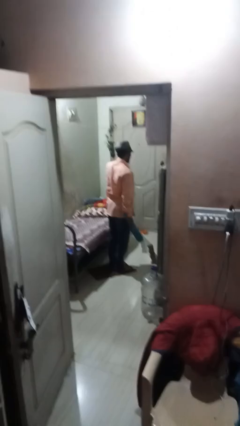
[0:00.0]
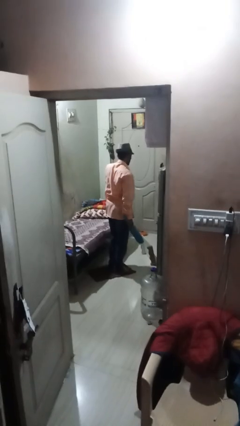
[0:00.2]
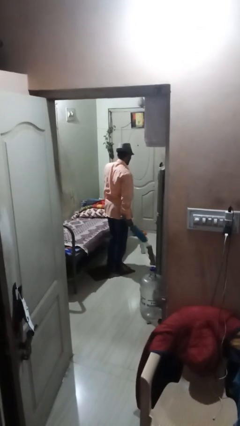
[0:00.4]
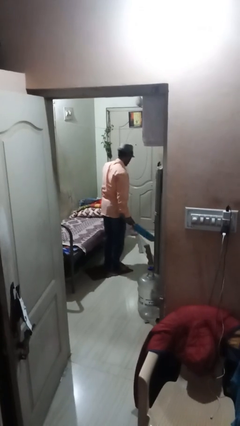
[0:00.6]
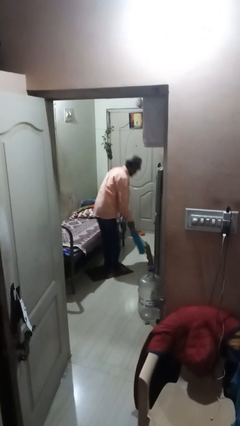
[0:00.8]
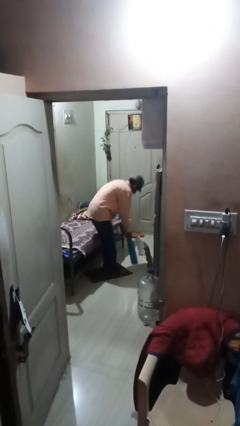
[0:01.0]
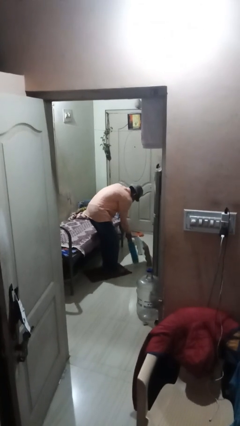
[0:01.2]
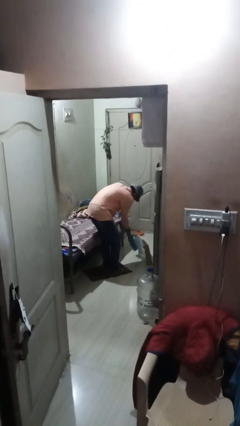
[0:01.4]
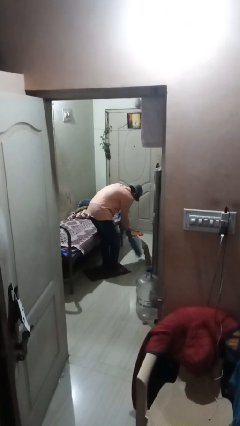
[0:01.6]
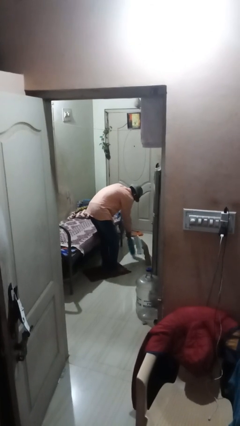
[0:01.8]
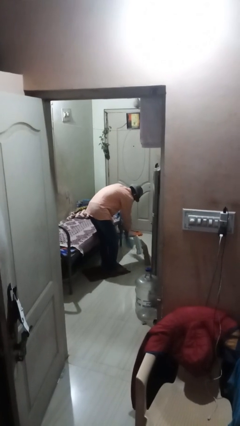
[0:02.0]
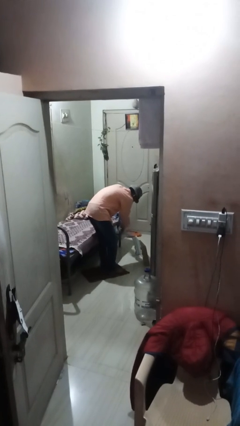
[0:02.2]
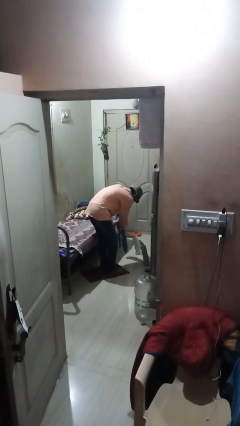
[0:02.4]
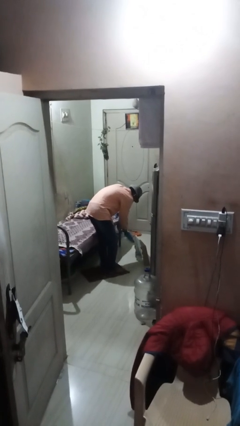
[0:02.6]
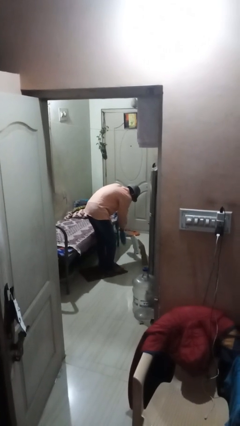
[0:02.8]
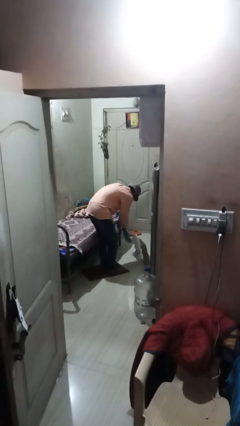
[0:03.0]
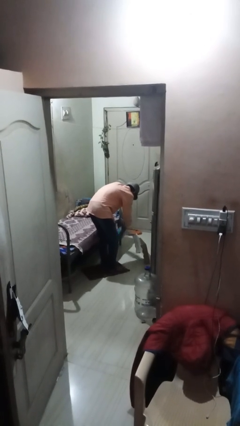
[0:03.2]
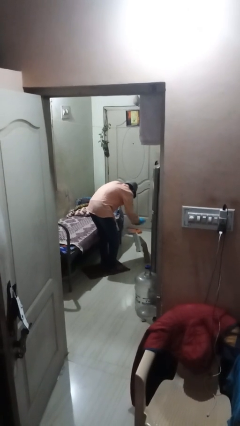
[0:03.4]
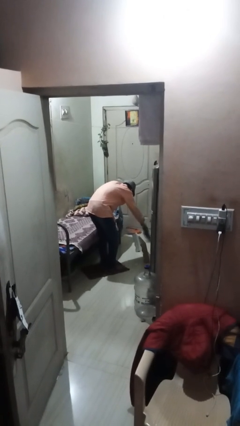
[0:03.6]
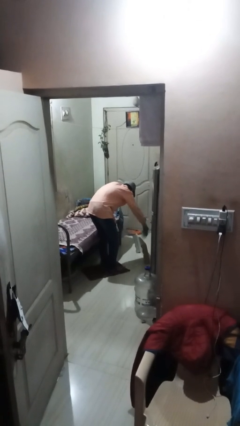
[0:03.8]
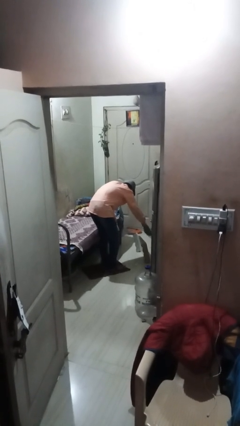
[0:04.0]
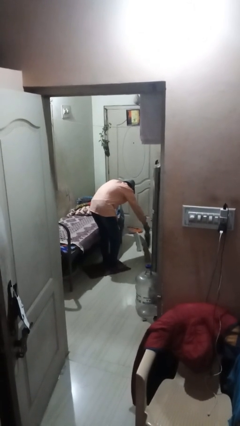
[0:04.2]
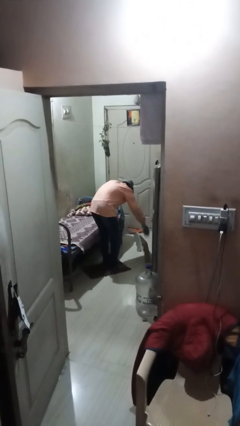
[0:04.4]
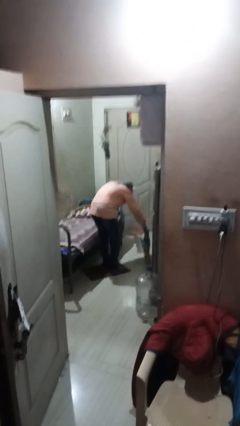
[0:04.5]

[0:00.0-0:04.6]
person dusts furniture

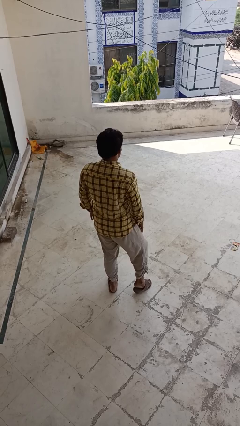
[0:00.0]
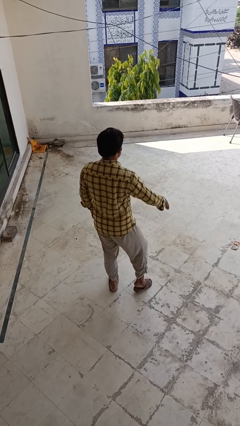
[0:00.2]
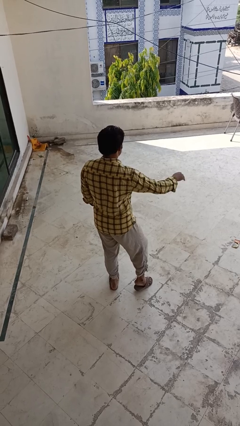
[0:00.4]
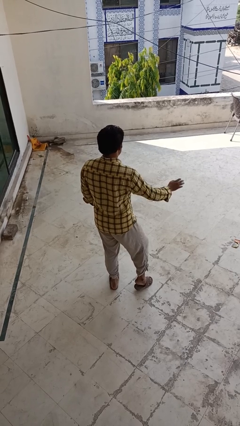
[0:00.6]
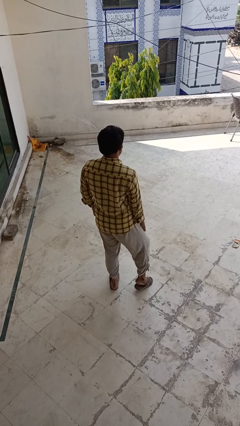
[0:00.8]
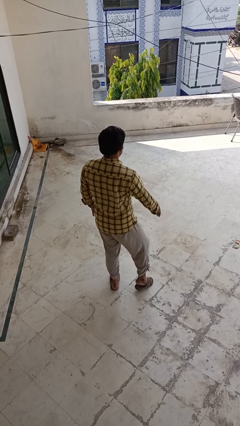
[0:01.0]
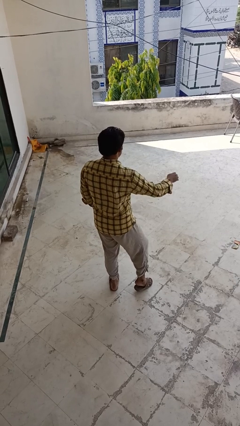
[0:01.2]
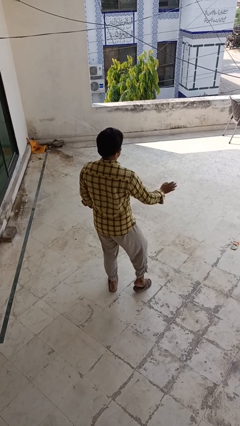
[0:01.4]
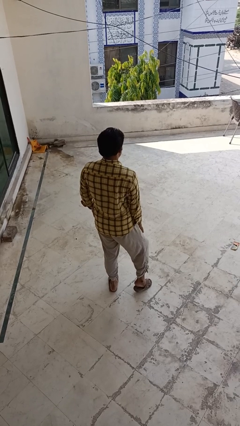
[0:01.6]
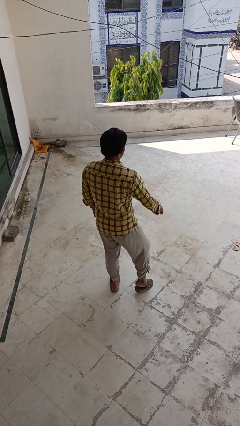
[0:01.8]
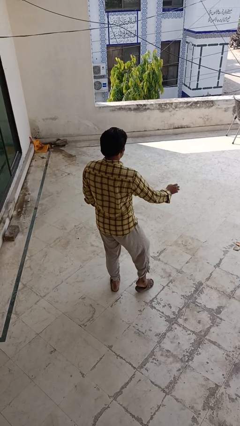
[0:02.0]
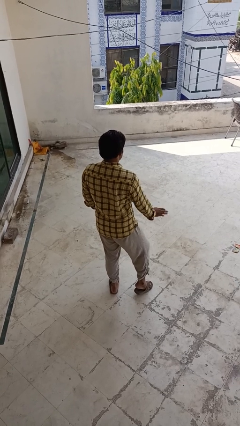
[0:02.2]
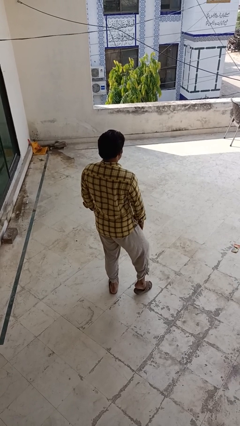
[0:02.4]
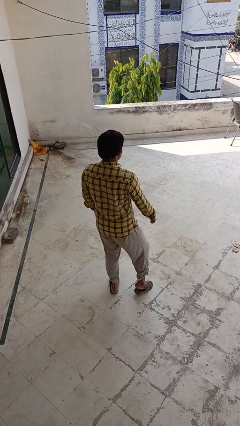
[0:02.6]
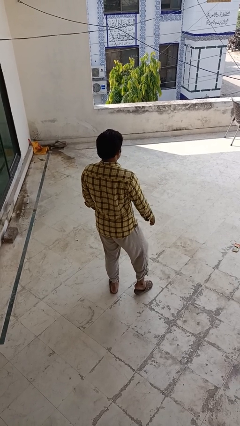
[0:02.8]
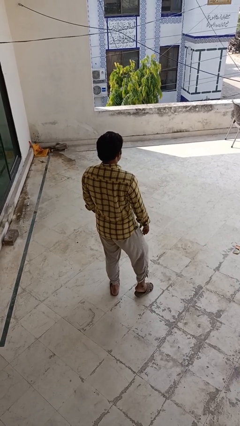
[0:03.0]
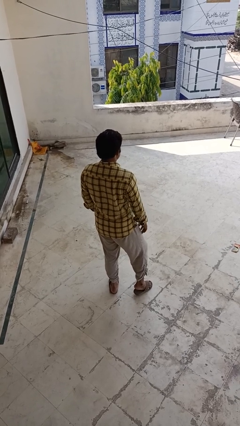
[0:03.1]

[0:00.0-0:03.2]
person slaps hands on thighs

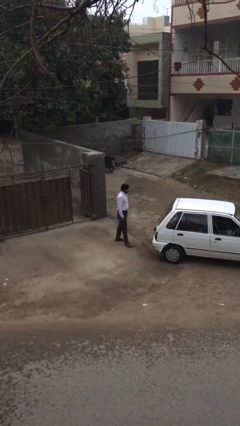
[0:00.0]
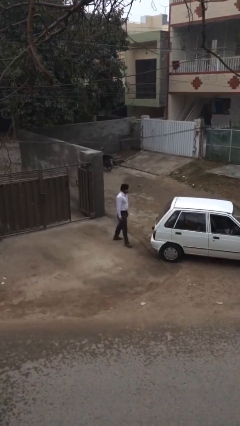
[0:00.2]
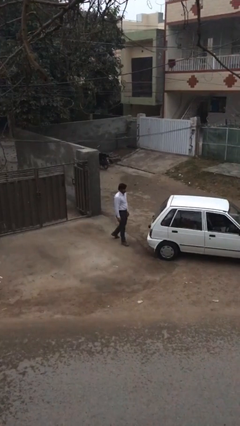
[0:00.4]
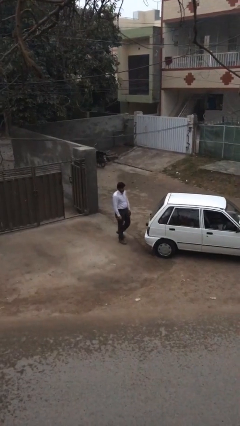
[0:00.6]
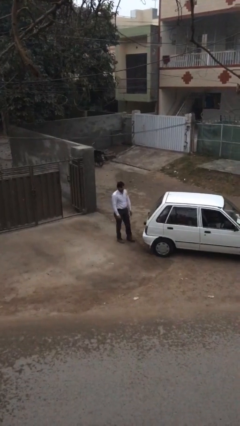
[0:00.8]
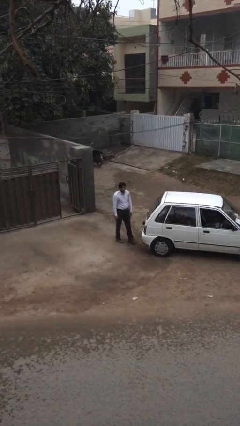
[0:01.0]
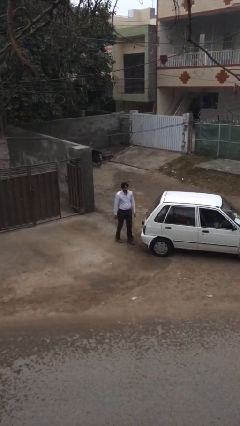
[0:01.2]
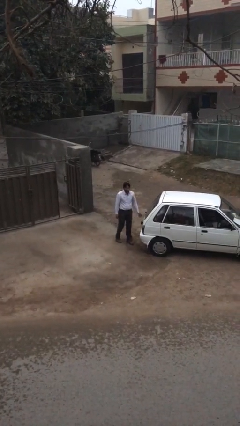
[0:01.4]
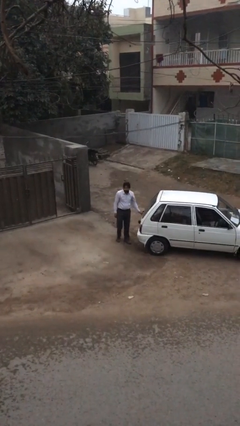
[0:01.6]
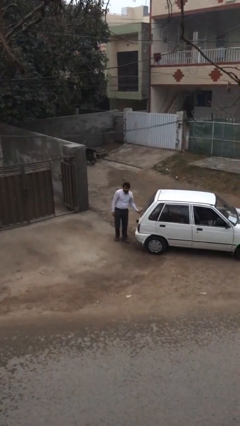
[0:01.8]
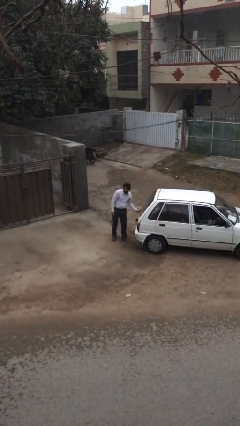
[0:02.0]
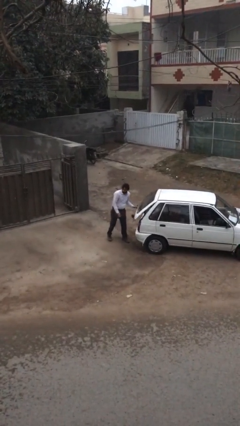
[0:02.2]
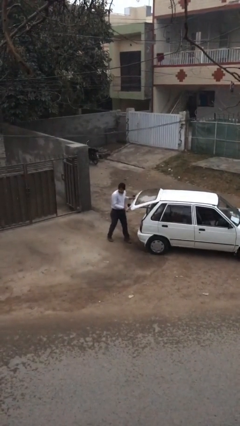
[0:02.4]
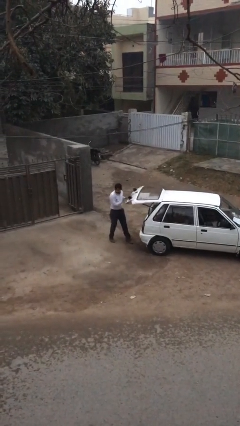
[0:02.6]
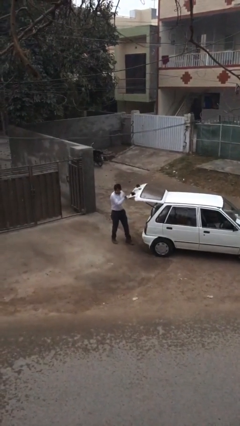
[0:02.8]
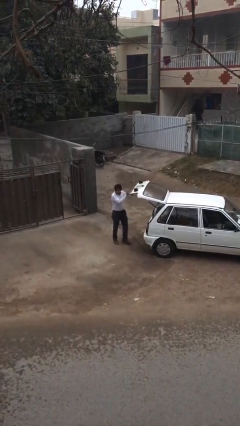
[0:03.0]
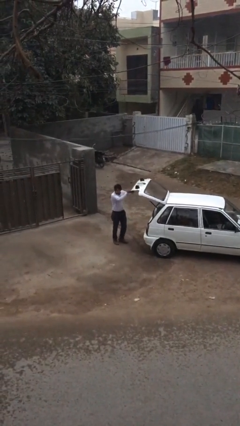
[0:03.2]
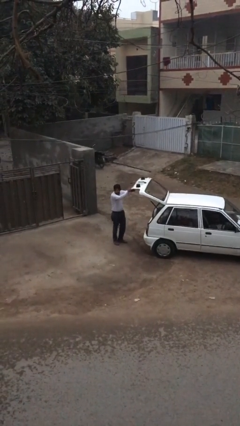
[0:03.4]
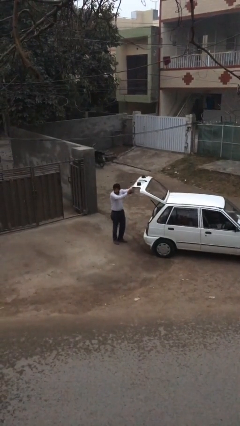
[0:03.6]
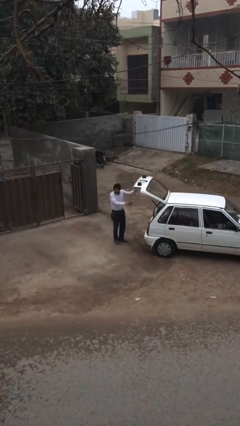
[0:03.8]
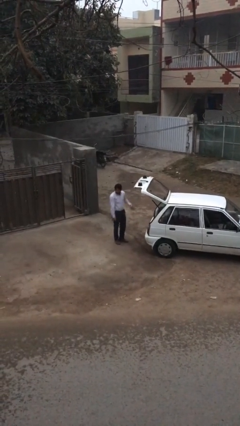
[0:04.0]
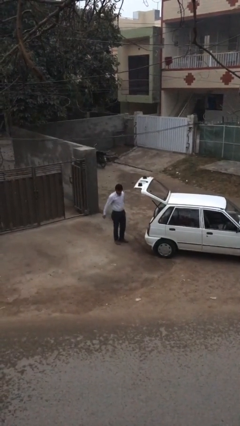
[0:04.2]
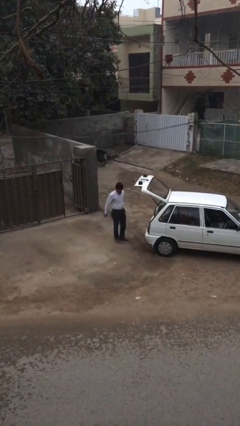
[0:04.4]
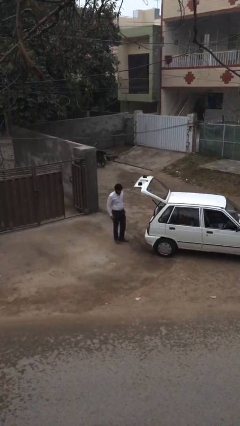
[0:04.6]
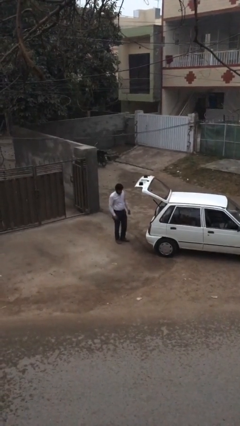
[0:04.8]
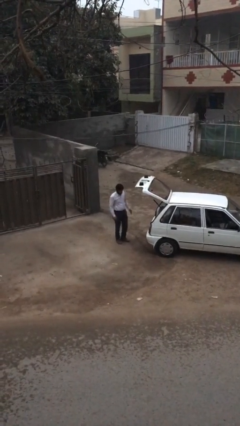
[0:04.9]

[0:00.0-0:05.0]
person opens car trunk

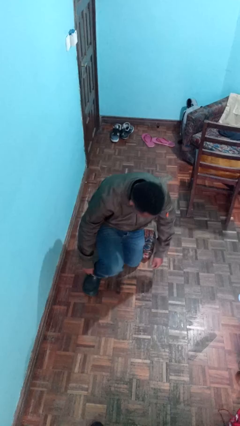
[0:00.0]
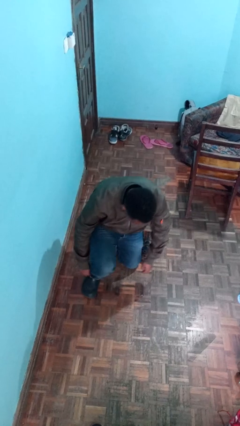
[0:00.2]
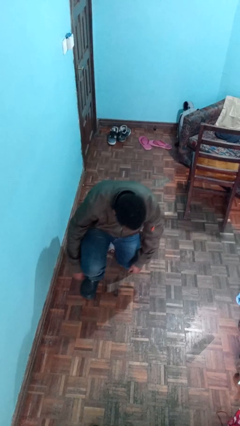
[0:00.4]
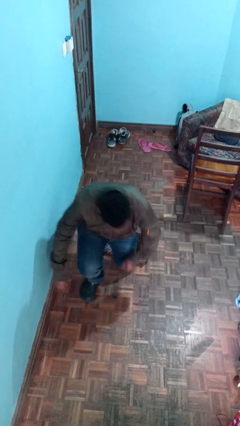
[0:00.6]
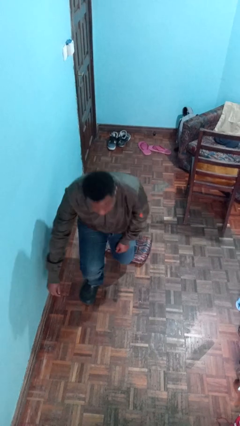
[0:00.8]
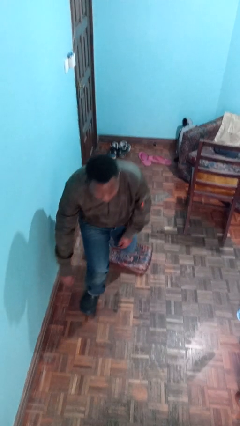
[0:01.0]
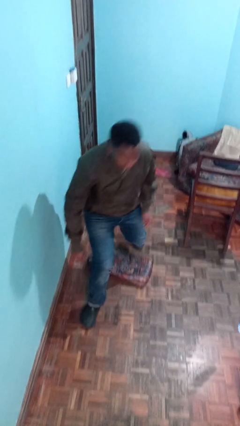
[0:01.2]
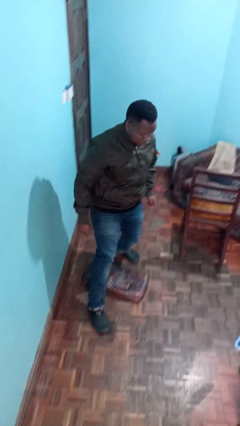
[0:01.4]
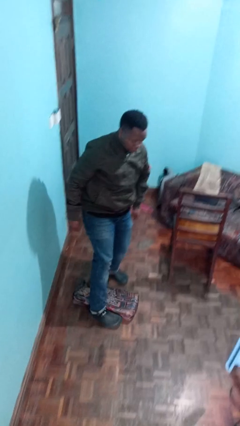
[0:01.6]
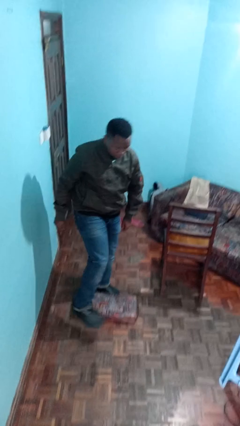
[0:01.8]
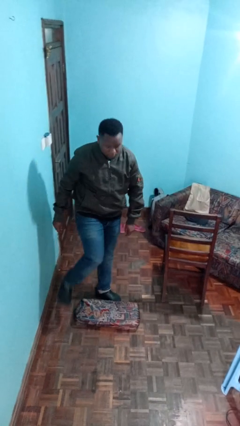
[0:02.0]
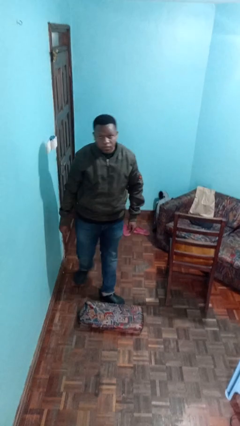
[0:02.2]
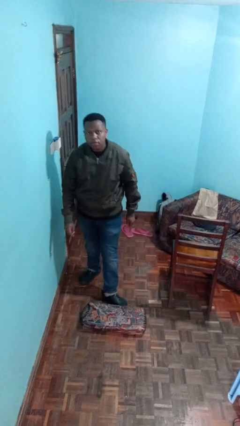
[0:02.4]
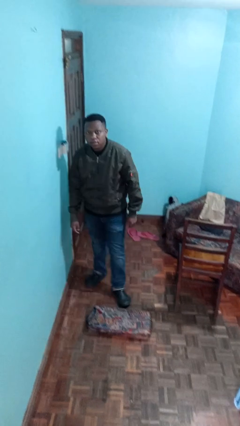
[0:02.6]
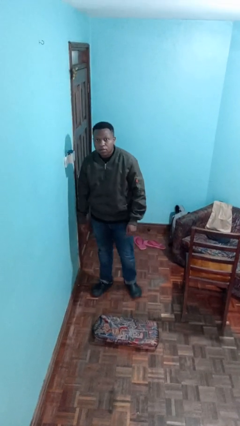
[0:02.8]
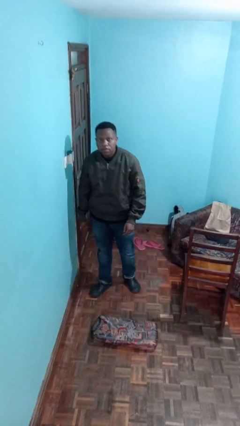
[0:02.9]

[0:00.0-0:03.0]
person stands up from floor

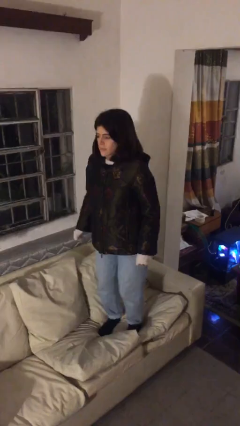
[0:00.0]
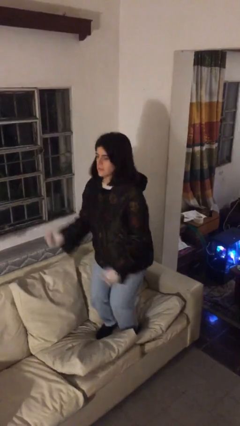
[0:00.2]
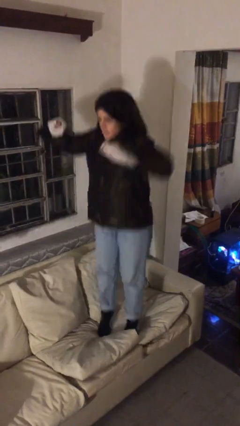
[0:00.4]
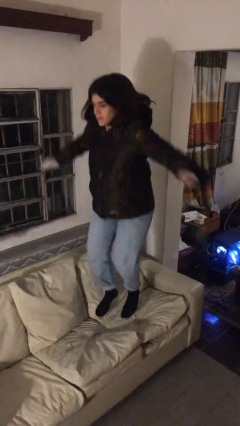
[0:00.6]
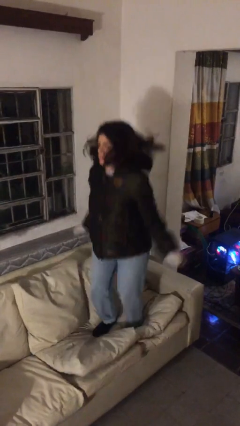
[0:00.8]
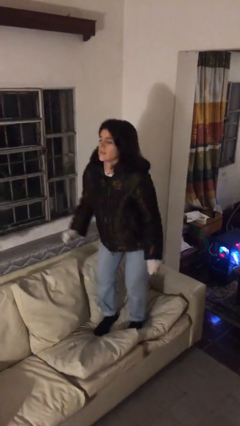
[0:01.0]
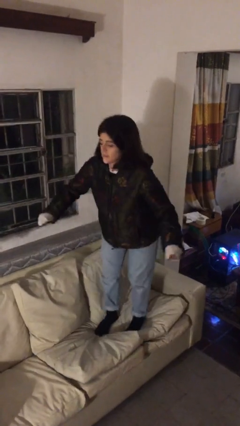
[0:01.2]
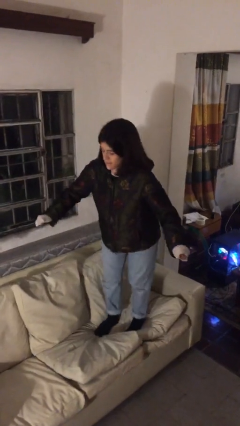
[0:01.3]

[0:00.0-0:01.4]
person jumps on couch

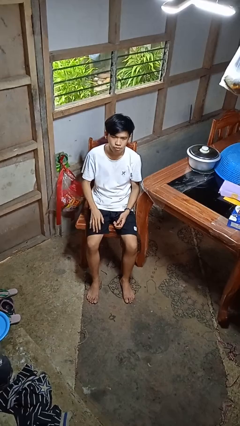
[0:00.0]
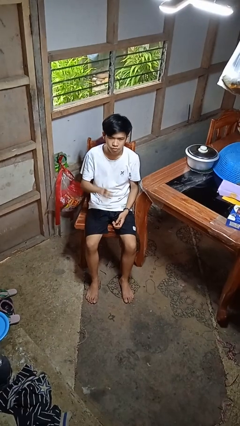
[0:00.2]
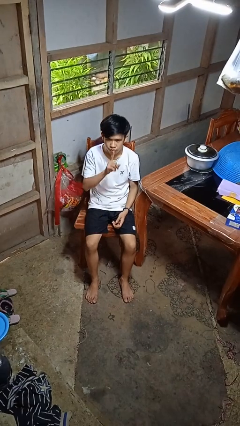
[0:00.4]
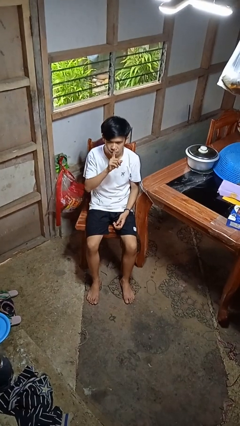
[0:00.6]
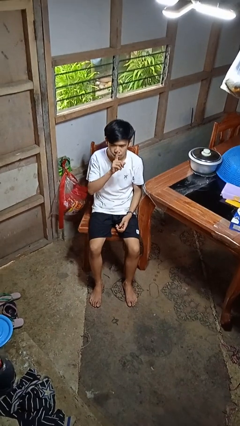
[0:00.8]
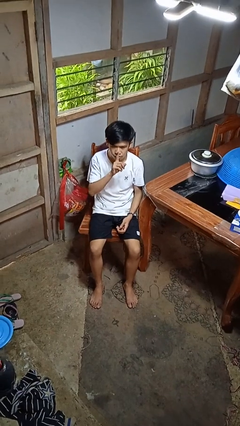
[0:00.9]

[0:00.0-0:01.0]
person gestures be quiet
